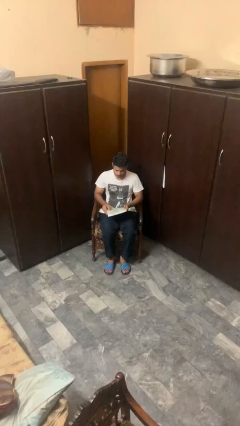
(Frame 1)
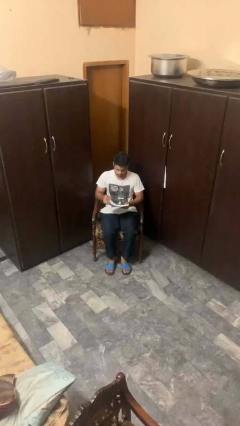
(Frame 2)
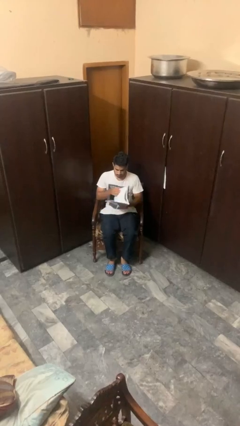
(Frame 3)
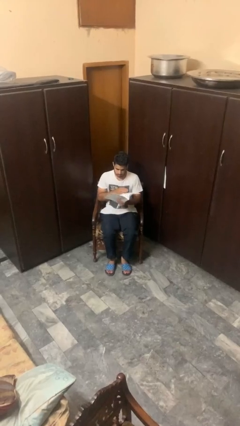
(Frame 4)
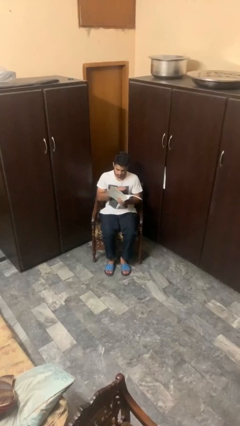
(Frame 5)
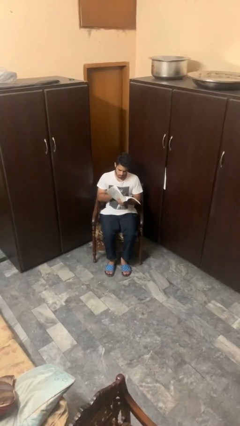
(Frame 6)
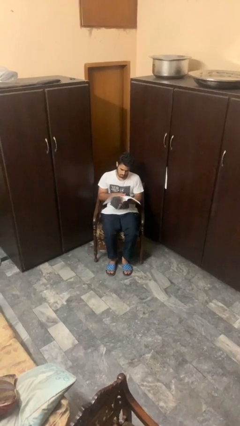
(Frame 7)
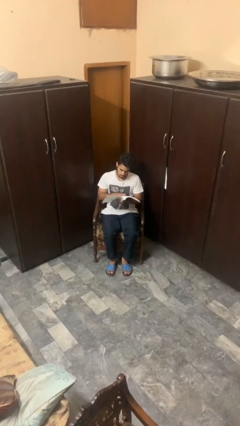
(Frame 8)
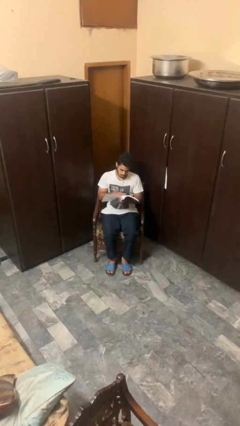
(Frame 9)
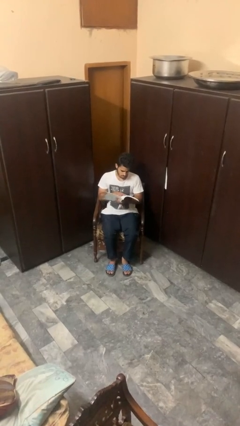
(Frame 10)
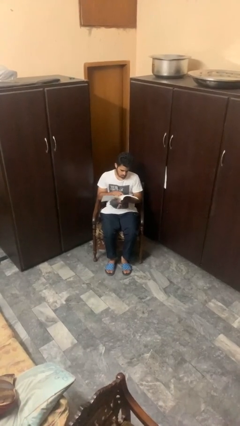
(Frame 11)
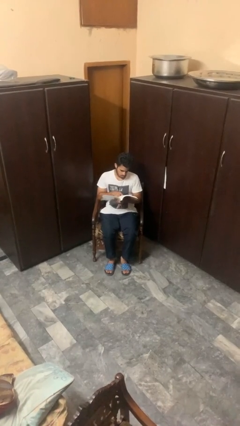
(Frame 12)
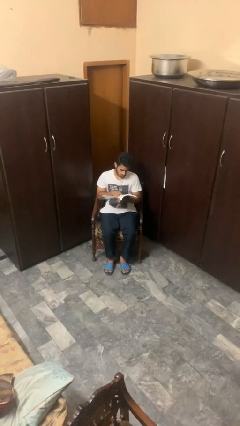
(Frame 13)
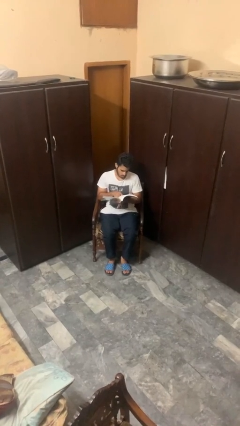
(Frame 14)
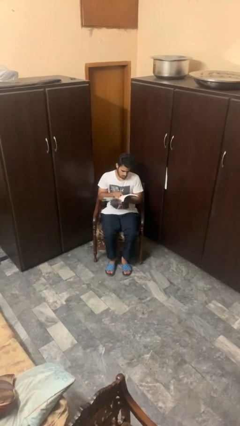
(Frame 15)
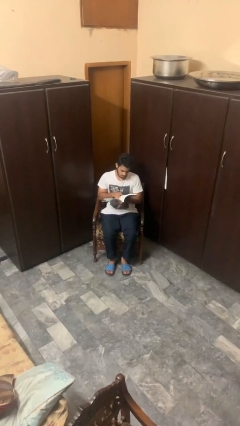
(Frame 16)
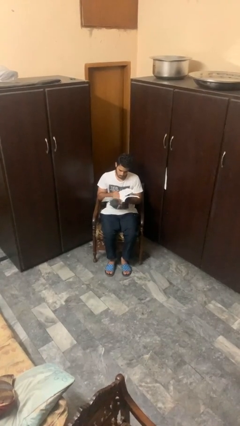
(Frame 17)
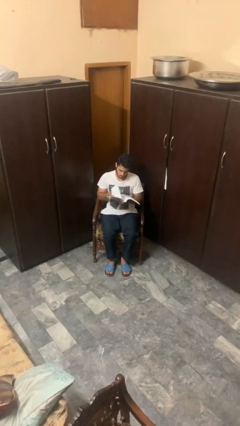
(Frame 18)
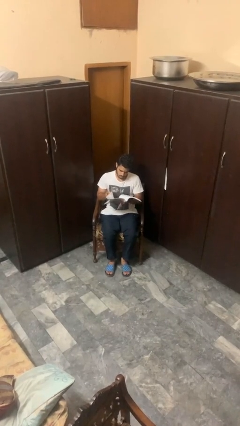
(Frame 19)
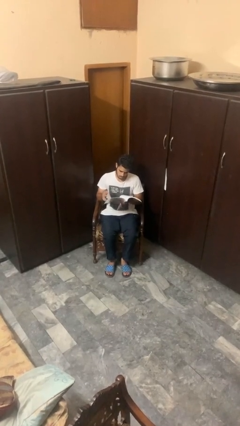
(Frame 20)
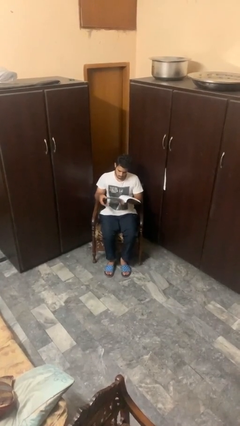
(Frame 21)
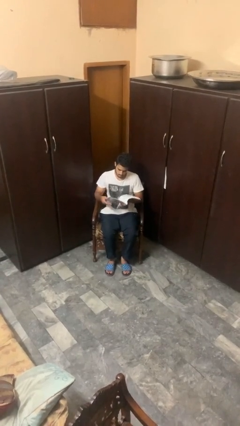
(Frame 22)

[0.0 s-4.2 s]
person reads book

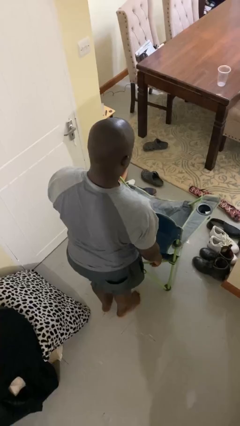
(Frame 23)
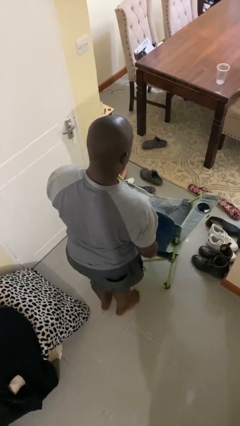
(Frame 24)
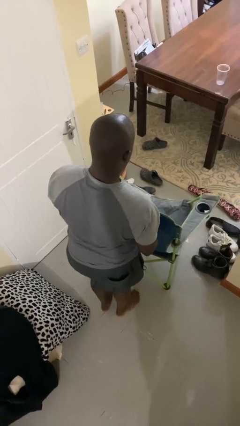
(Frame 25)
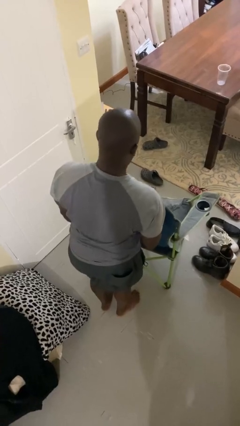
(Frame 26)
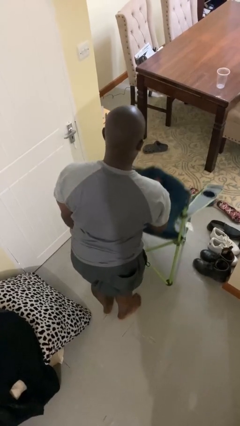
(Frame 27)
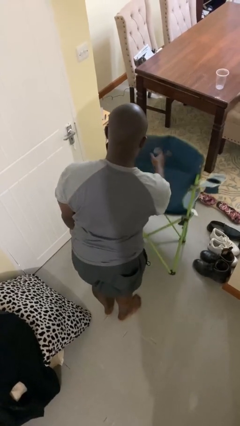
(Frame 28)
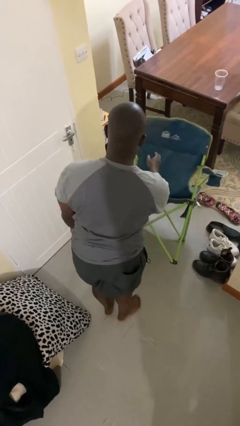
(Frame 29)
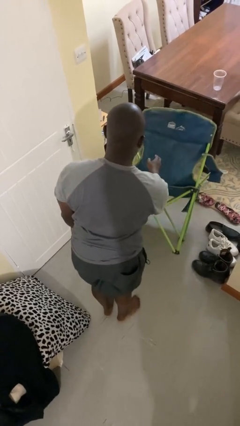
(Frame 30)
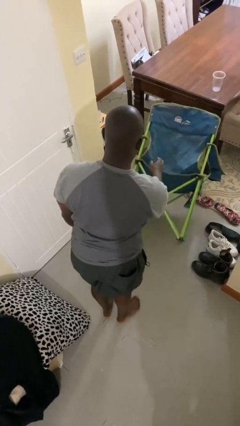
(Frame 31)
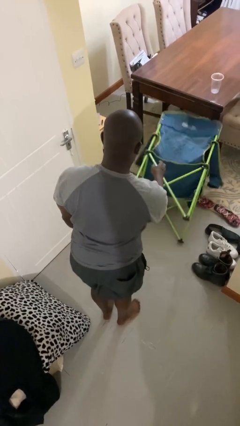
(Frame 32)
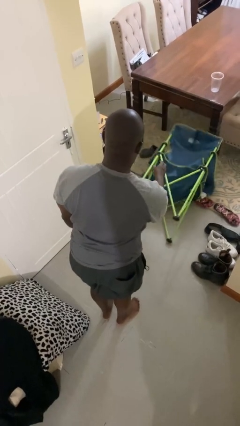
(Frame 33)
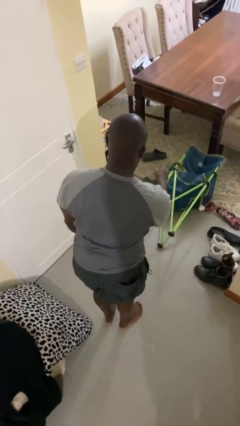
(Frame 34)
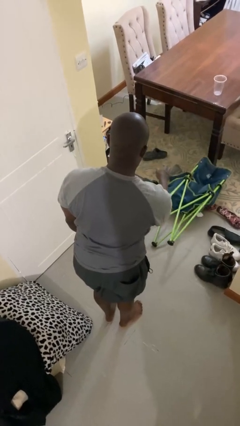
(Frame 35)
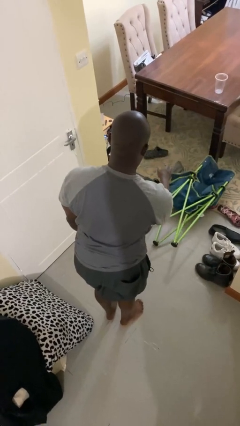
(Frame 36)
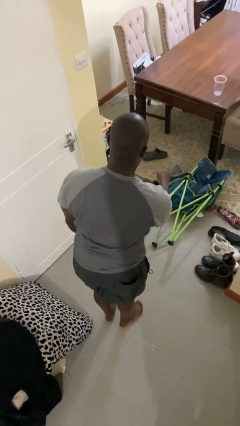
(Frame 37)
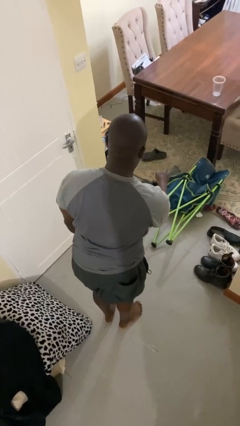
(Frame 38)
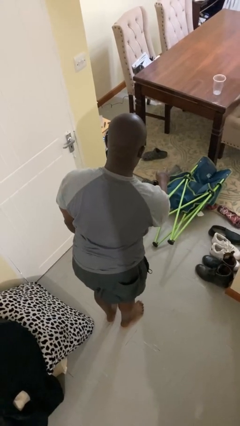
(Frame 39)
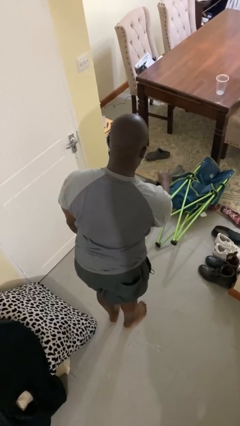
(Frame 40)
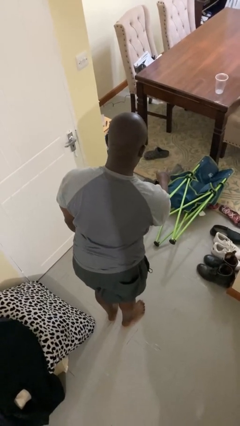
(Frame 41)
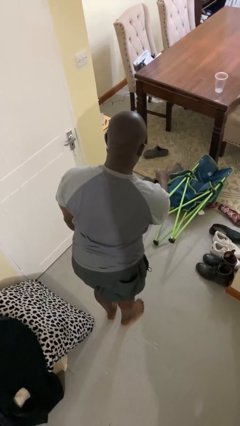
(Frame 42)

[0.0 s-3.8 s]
person knocks over furniture

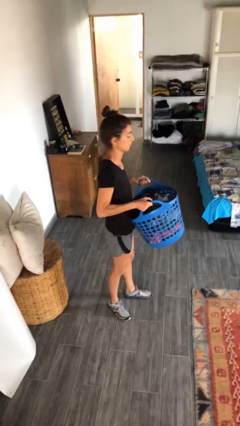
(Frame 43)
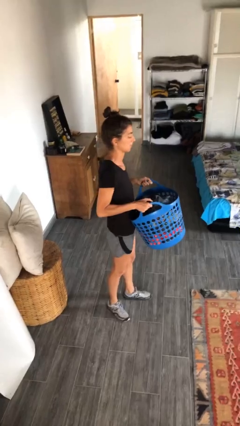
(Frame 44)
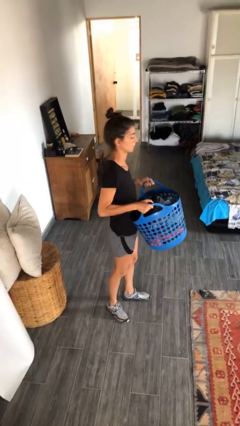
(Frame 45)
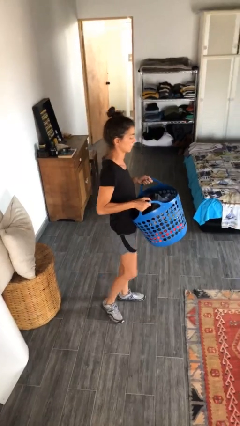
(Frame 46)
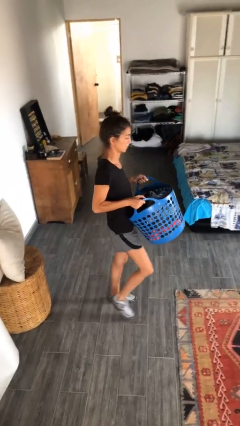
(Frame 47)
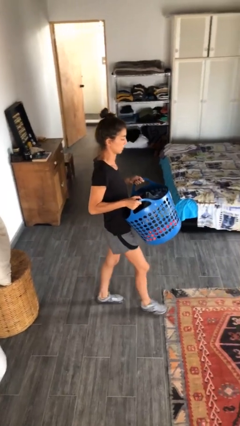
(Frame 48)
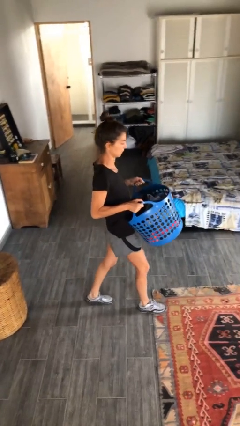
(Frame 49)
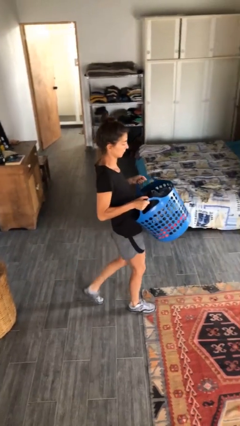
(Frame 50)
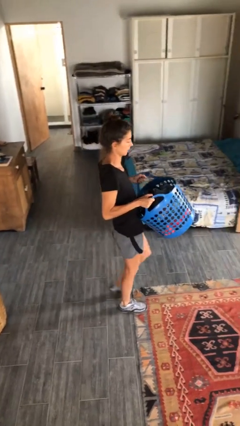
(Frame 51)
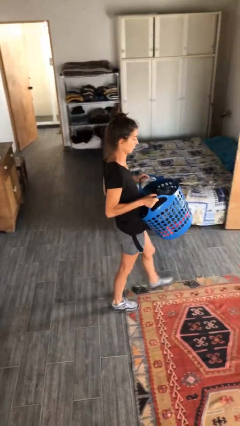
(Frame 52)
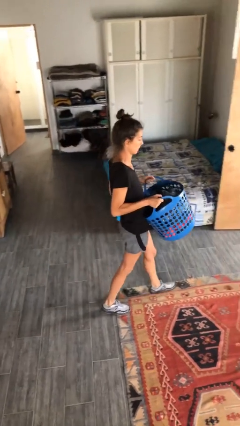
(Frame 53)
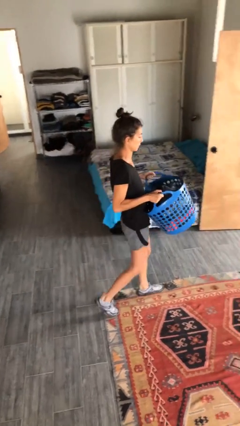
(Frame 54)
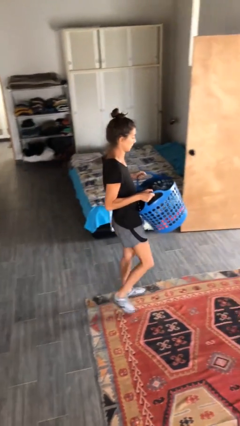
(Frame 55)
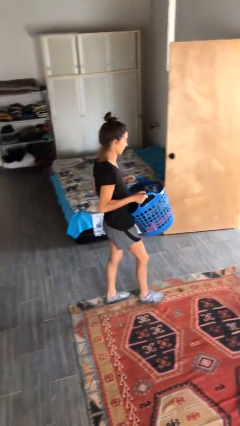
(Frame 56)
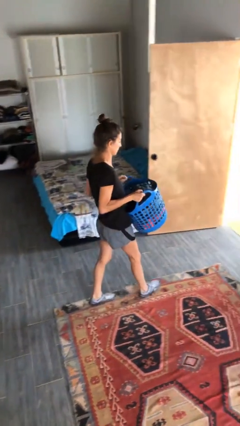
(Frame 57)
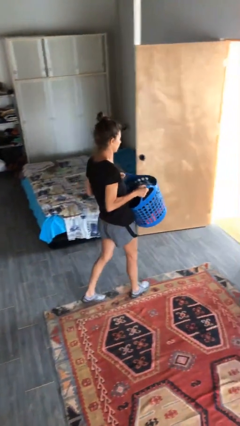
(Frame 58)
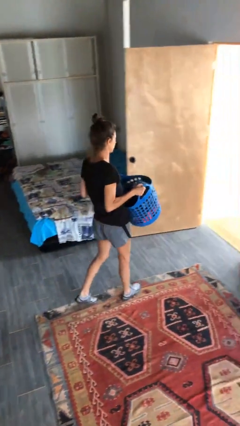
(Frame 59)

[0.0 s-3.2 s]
person carries laundry basket

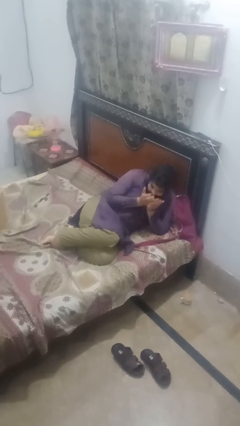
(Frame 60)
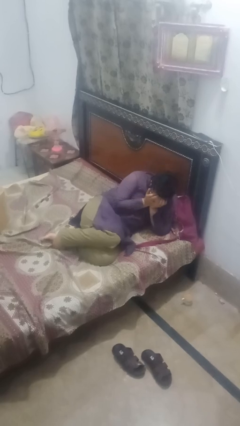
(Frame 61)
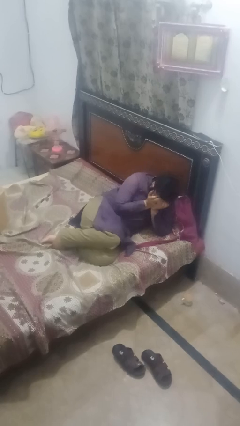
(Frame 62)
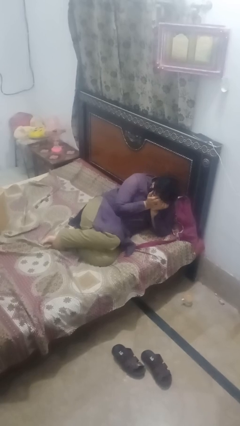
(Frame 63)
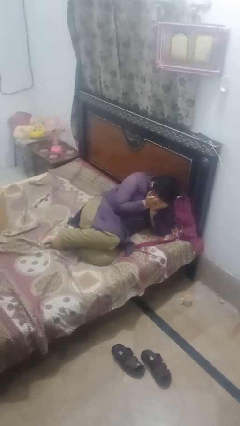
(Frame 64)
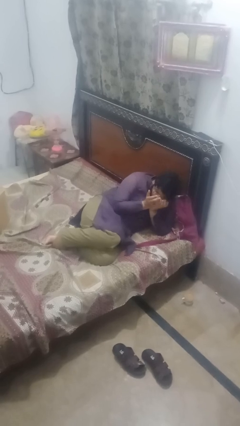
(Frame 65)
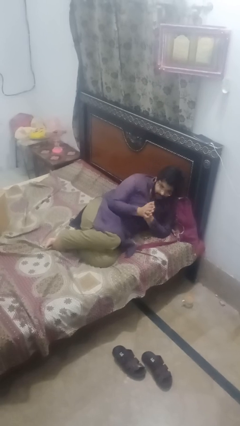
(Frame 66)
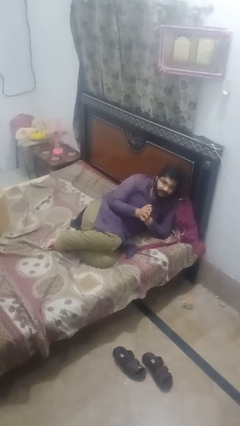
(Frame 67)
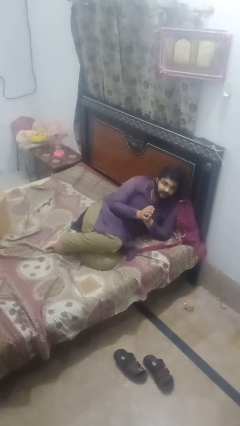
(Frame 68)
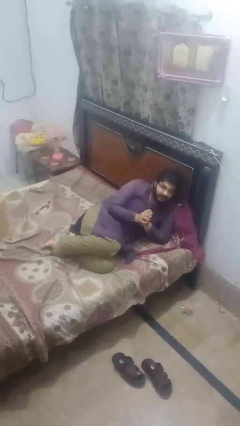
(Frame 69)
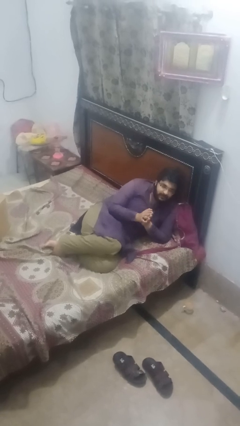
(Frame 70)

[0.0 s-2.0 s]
person covers face with hands

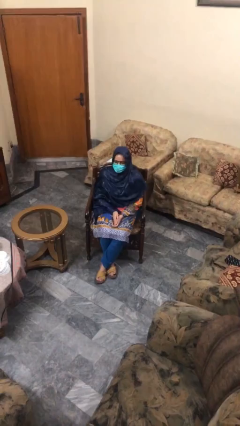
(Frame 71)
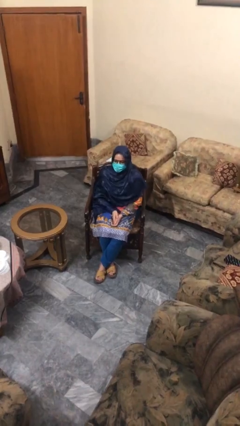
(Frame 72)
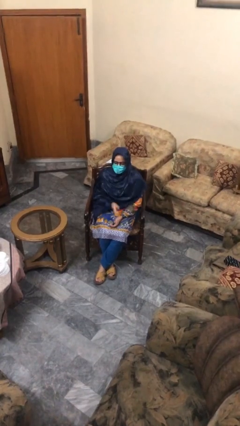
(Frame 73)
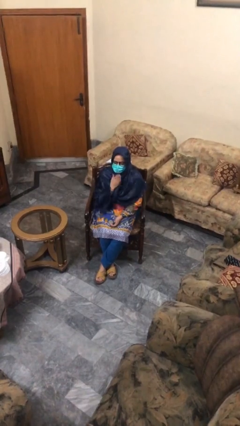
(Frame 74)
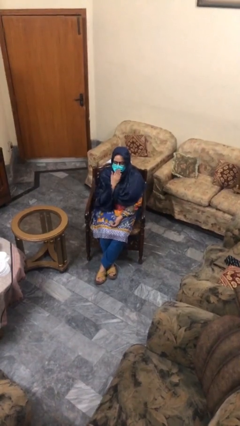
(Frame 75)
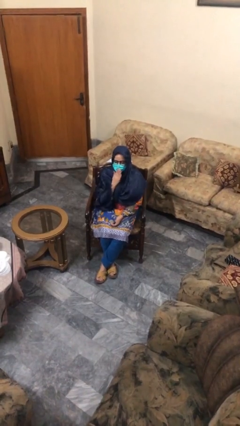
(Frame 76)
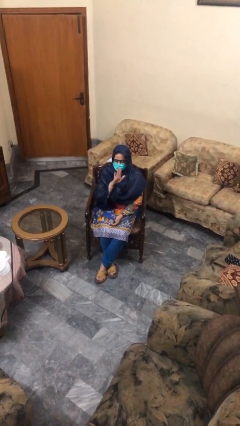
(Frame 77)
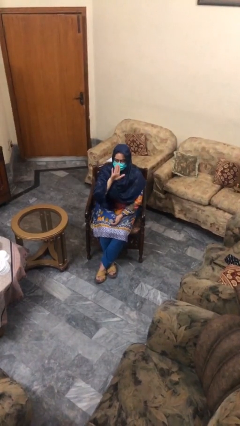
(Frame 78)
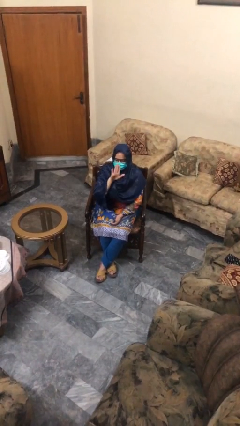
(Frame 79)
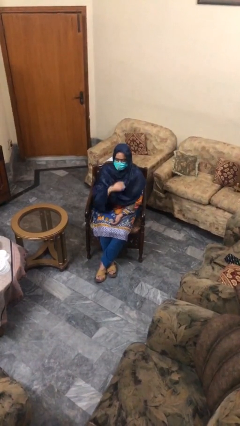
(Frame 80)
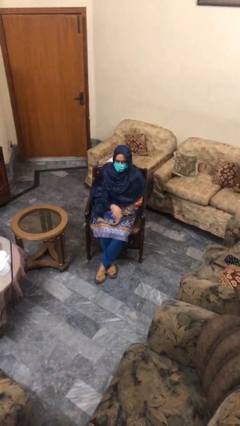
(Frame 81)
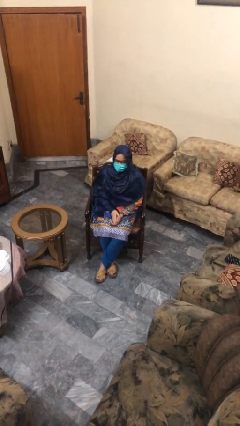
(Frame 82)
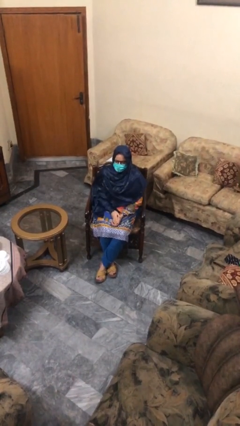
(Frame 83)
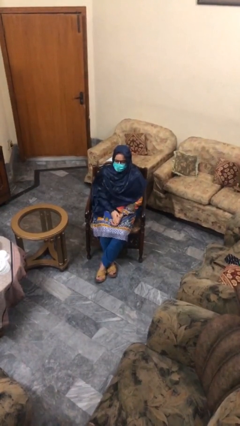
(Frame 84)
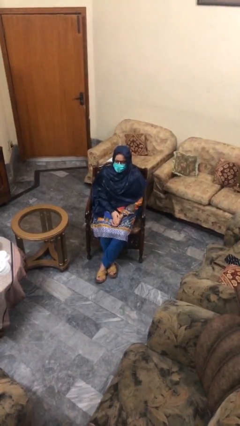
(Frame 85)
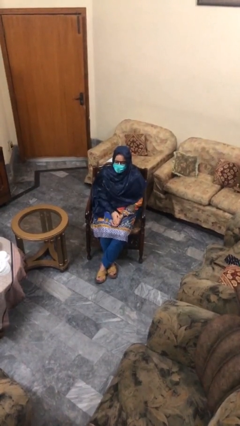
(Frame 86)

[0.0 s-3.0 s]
person gestures blow kiss

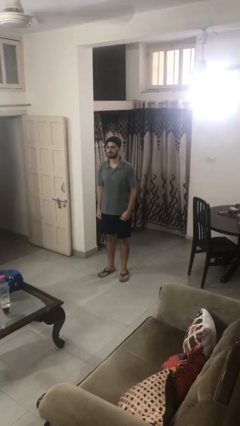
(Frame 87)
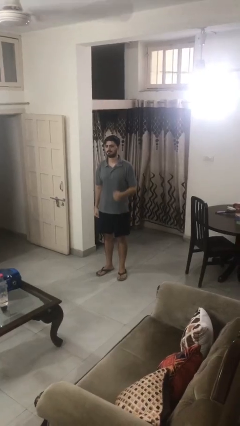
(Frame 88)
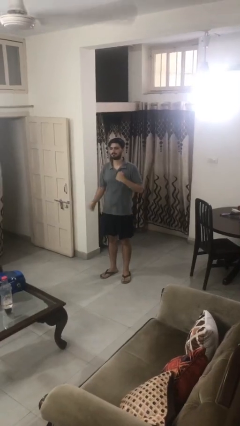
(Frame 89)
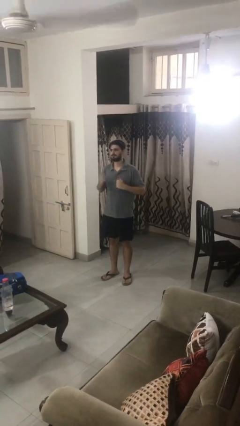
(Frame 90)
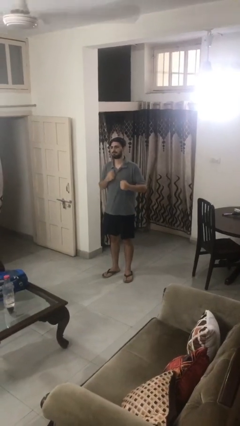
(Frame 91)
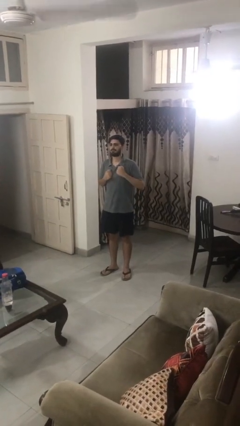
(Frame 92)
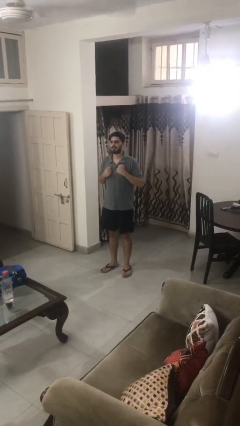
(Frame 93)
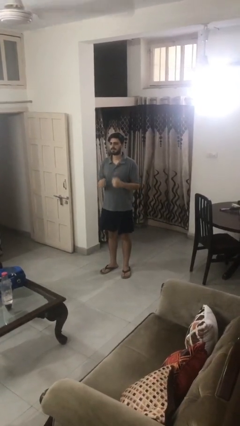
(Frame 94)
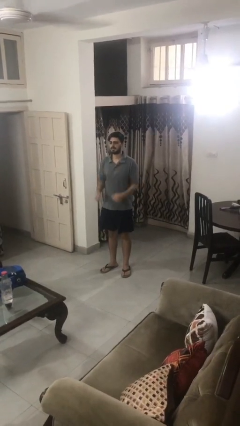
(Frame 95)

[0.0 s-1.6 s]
person drums on chest
